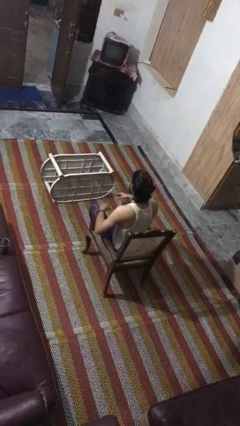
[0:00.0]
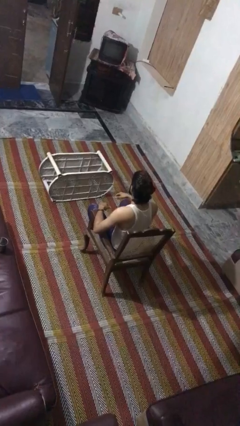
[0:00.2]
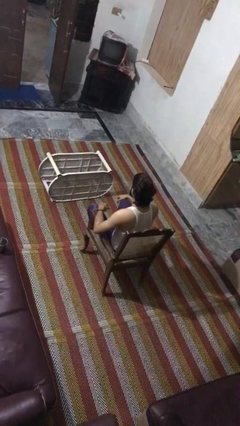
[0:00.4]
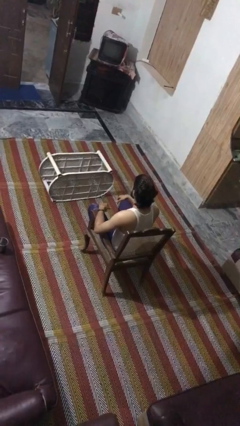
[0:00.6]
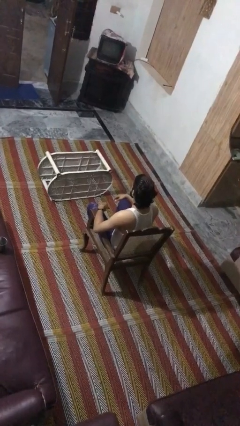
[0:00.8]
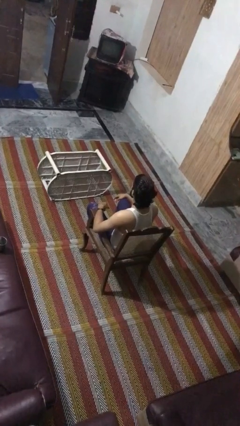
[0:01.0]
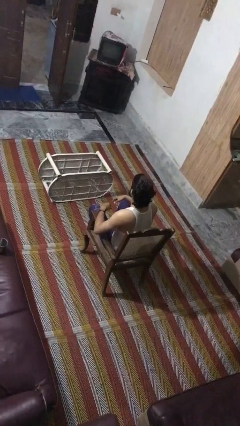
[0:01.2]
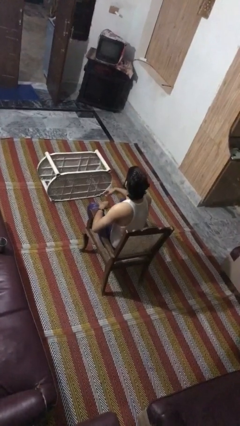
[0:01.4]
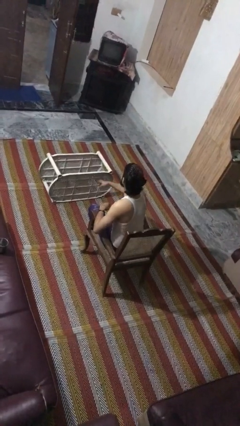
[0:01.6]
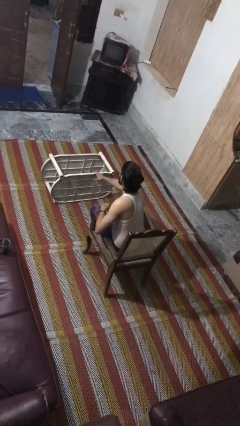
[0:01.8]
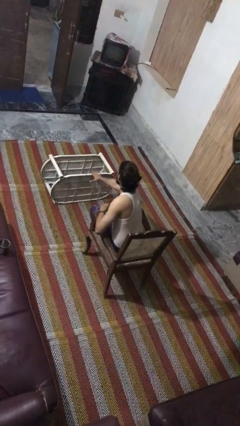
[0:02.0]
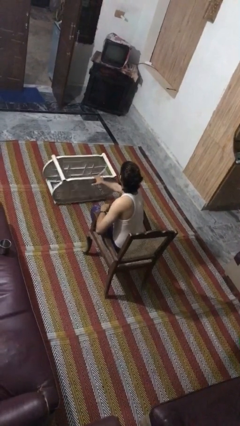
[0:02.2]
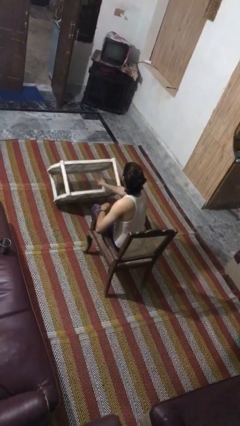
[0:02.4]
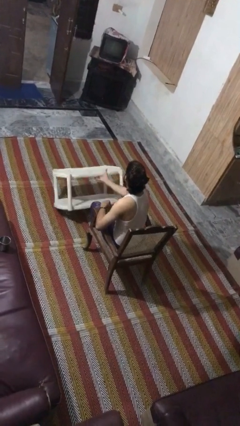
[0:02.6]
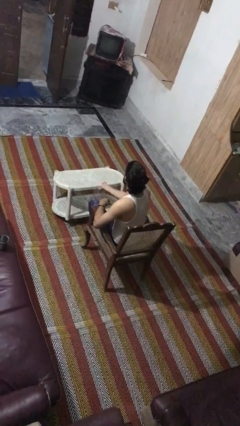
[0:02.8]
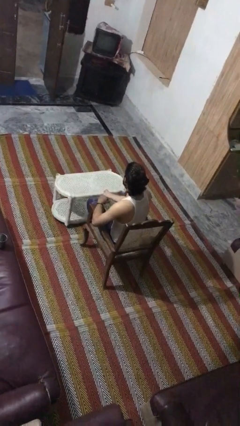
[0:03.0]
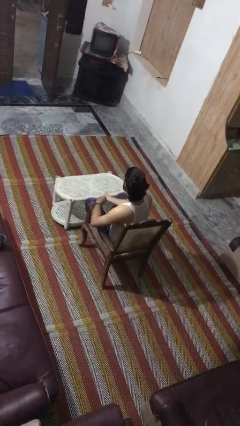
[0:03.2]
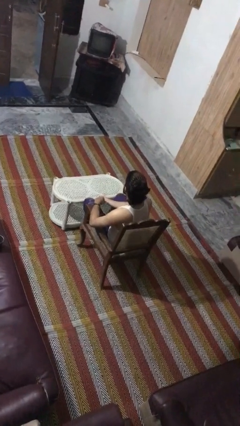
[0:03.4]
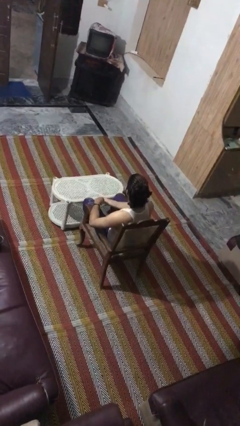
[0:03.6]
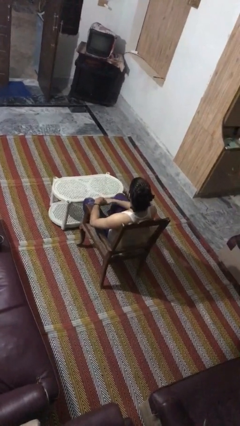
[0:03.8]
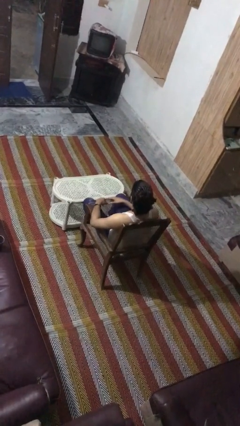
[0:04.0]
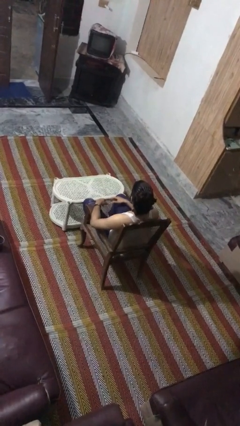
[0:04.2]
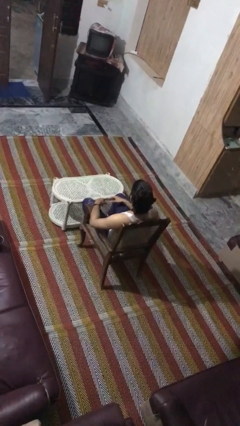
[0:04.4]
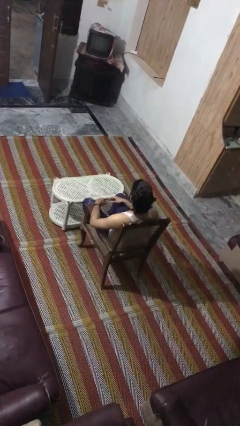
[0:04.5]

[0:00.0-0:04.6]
person sets upright furniture

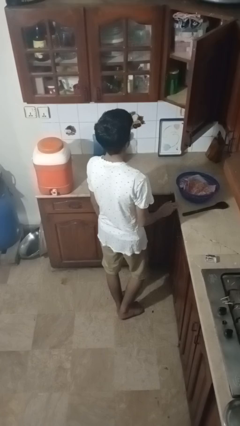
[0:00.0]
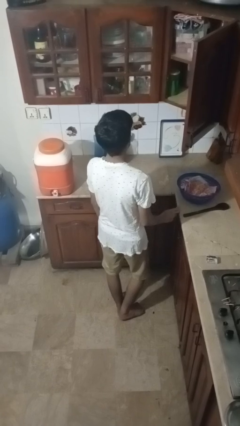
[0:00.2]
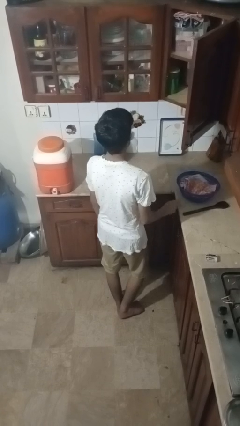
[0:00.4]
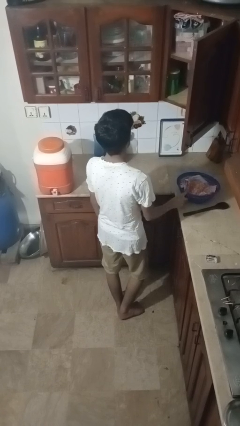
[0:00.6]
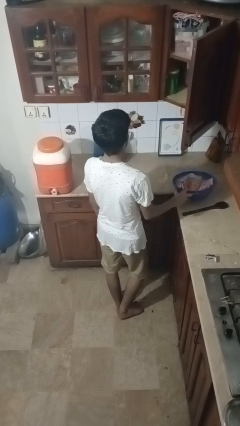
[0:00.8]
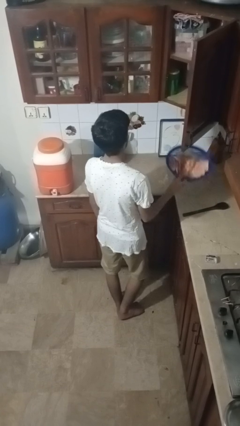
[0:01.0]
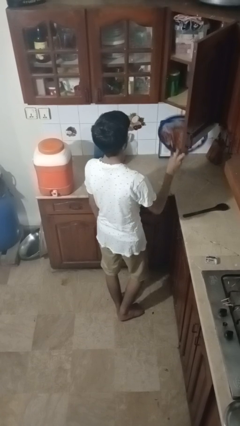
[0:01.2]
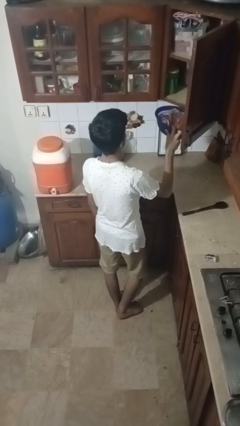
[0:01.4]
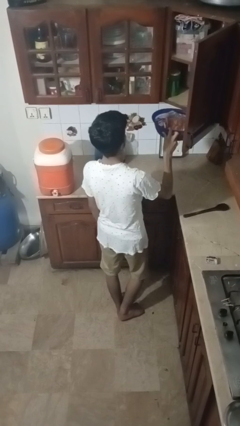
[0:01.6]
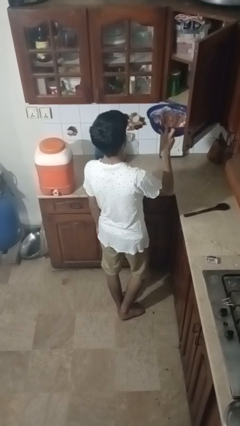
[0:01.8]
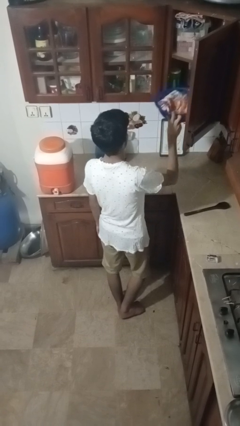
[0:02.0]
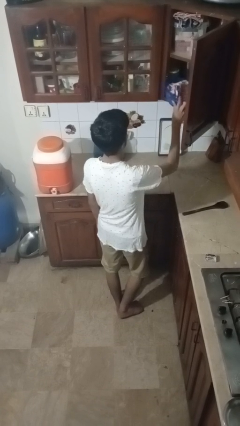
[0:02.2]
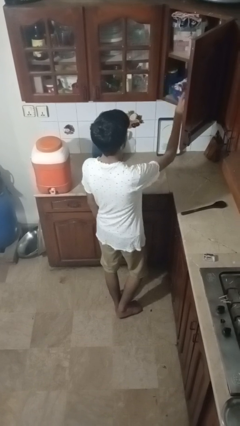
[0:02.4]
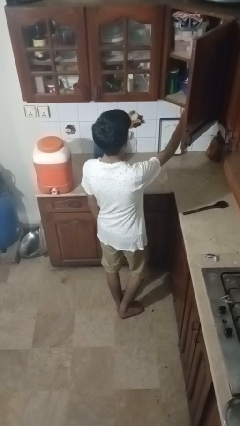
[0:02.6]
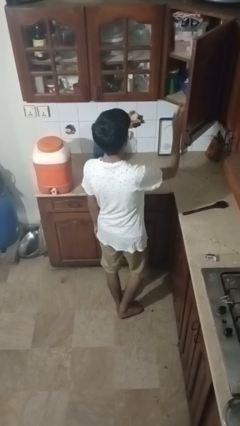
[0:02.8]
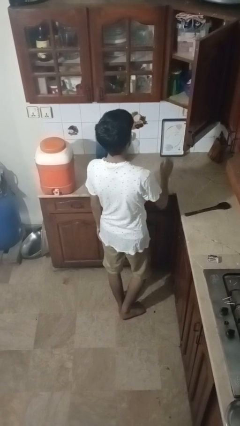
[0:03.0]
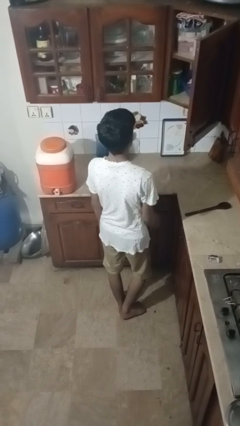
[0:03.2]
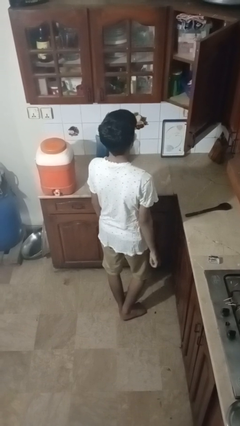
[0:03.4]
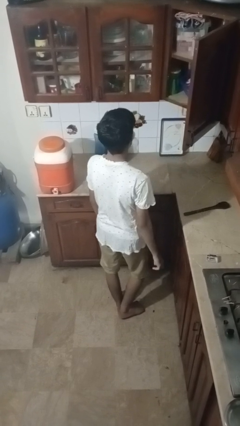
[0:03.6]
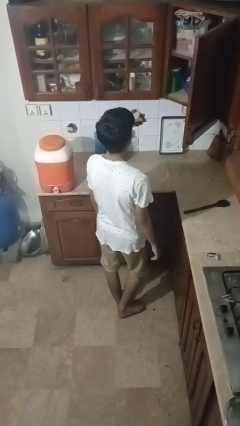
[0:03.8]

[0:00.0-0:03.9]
person puts object in cabinet

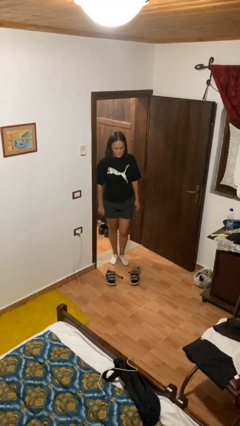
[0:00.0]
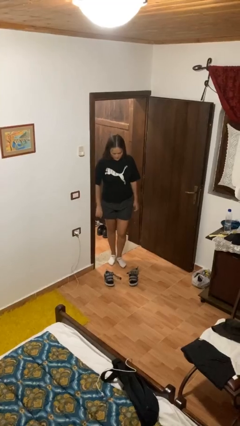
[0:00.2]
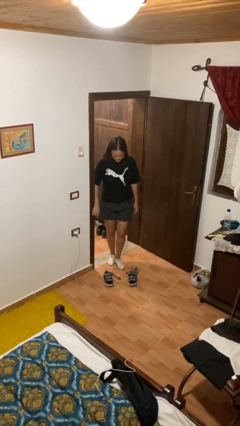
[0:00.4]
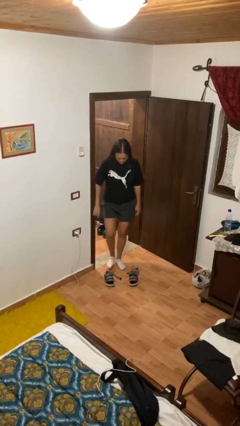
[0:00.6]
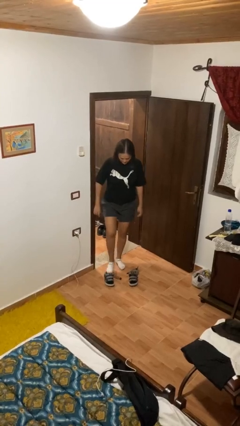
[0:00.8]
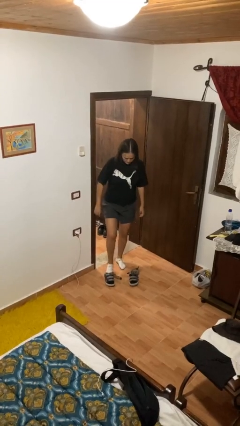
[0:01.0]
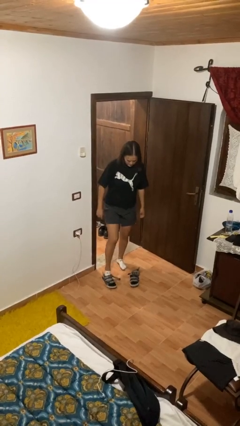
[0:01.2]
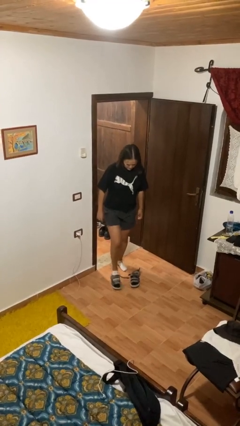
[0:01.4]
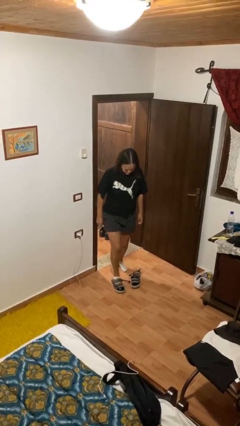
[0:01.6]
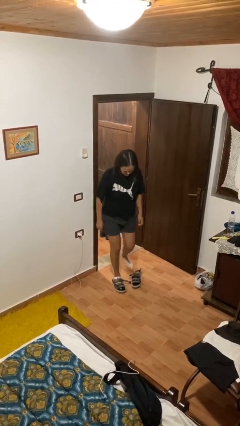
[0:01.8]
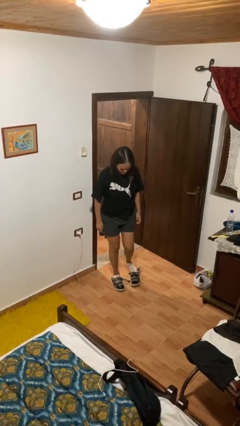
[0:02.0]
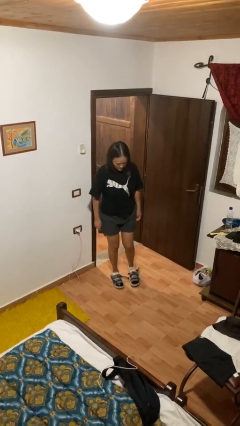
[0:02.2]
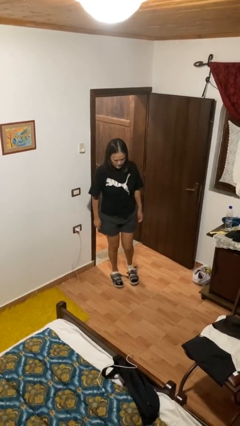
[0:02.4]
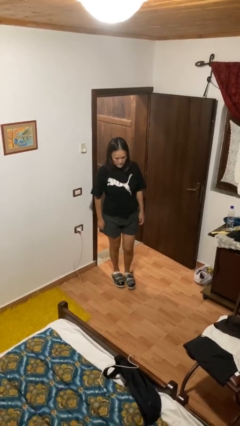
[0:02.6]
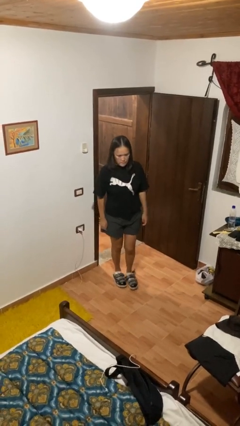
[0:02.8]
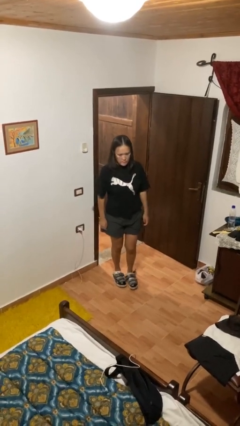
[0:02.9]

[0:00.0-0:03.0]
person puts on shoes

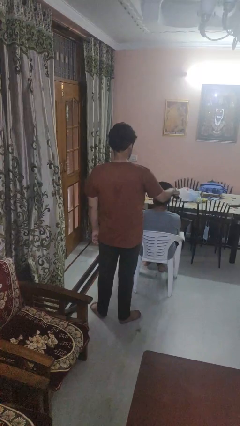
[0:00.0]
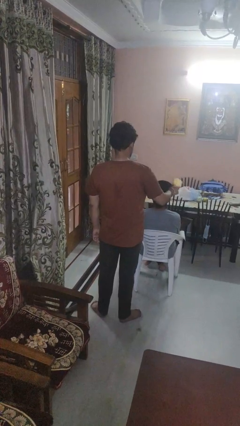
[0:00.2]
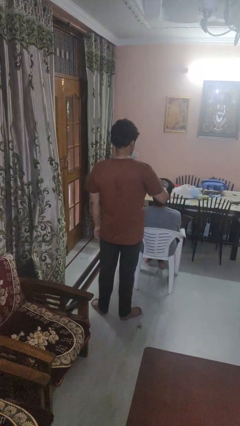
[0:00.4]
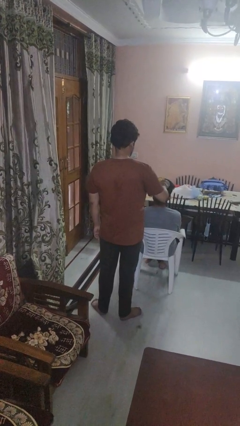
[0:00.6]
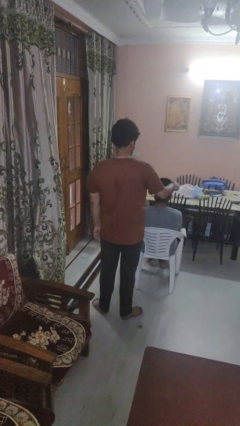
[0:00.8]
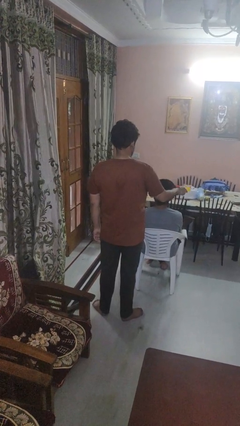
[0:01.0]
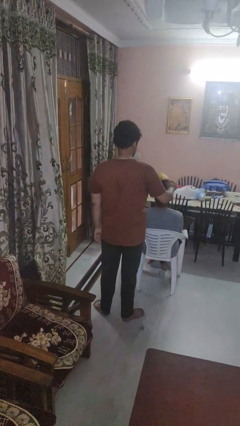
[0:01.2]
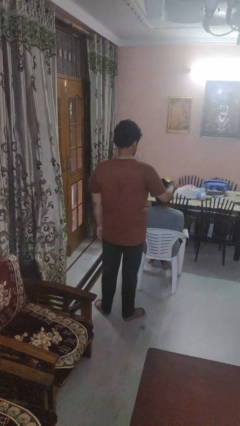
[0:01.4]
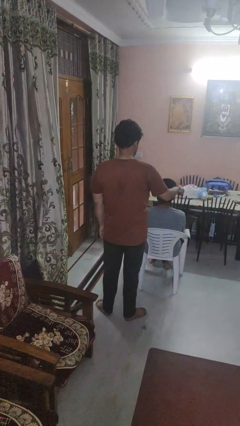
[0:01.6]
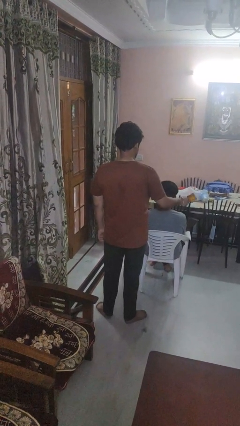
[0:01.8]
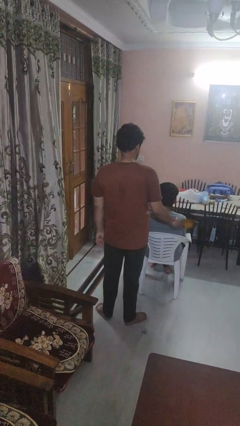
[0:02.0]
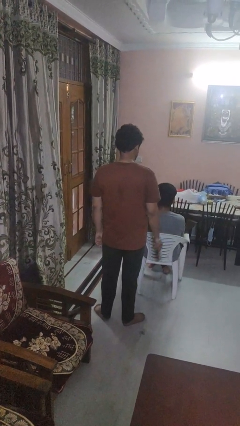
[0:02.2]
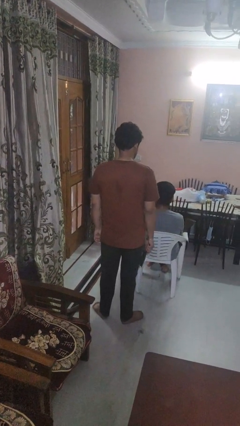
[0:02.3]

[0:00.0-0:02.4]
person brushes hair of person

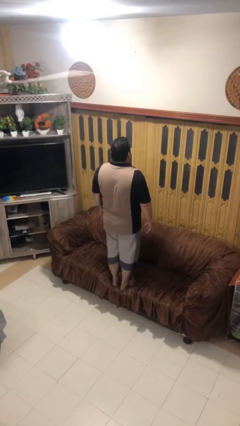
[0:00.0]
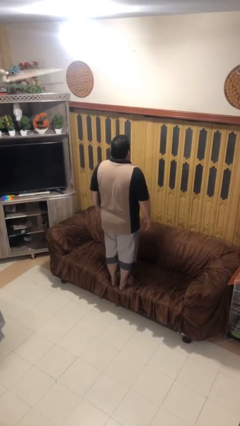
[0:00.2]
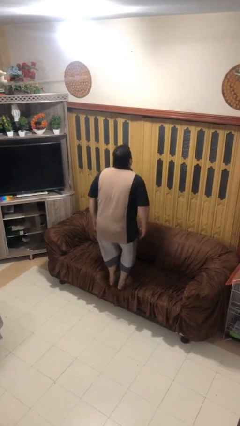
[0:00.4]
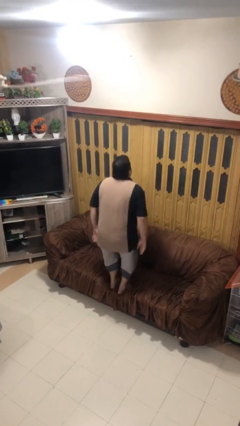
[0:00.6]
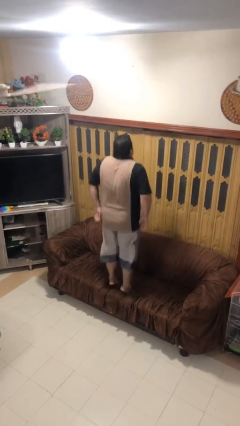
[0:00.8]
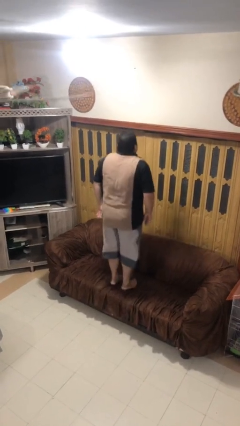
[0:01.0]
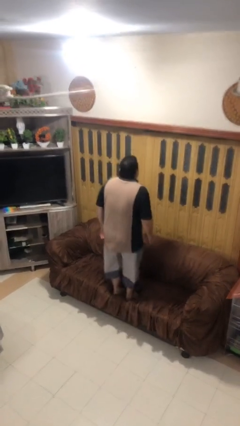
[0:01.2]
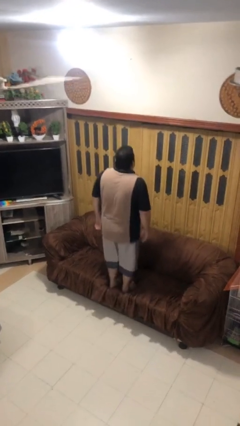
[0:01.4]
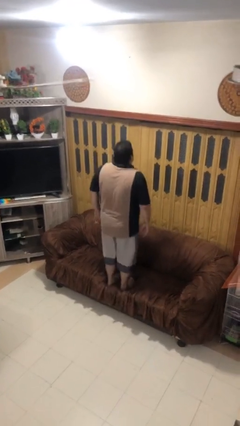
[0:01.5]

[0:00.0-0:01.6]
person jumps on couch

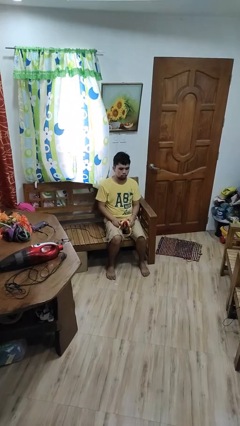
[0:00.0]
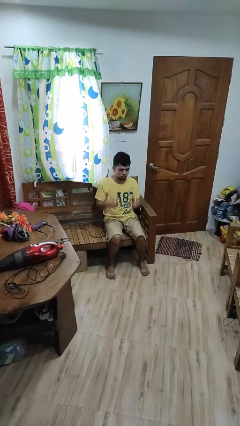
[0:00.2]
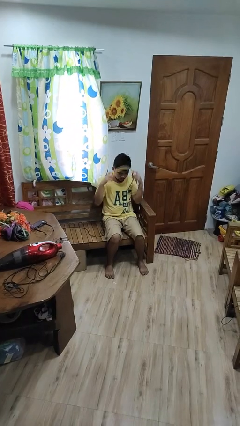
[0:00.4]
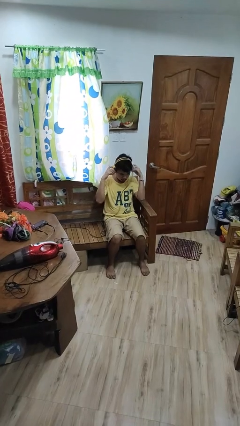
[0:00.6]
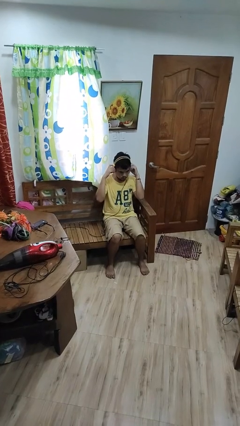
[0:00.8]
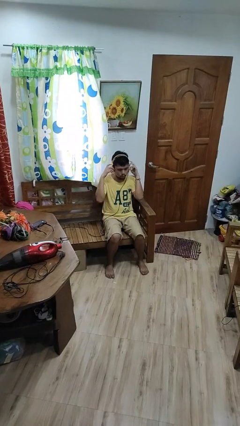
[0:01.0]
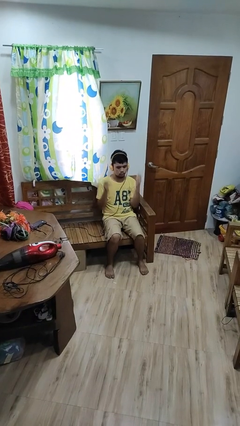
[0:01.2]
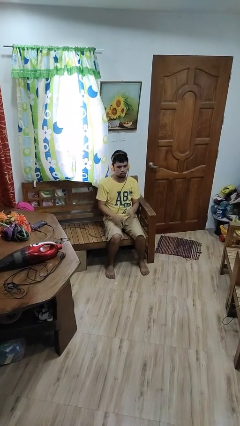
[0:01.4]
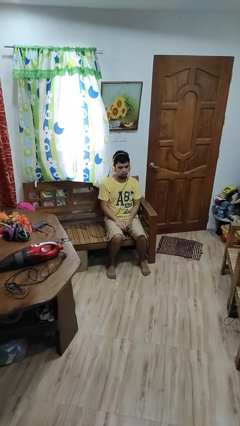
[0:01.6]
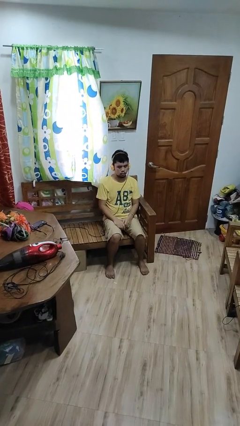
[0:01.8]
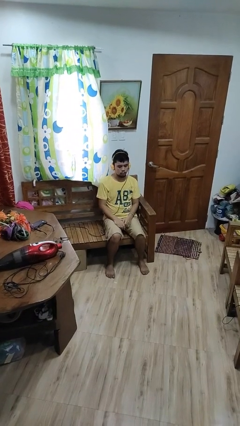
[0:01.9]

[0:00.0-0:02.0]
person puts on headphones

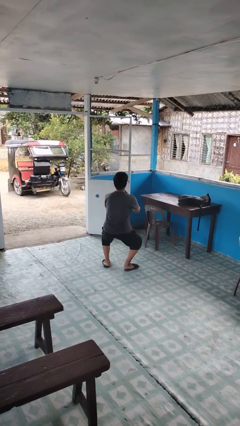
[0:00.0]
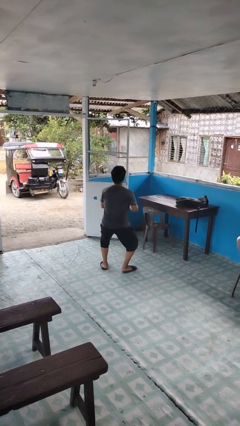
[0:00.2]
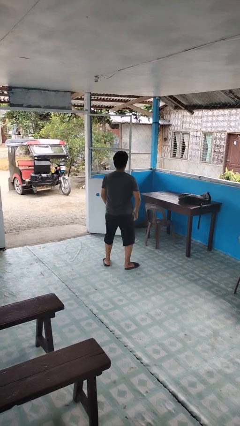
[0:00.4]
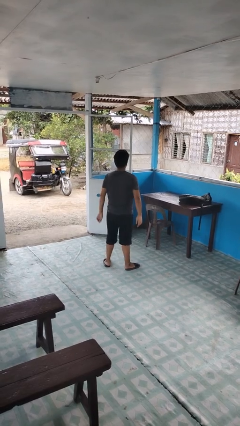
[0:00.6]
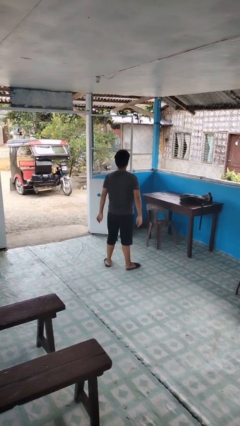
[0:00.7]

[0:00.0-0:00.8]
person stands up
